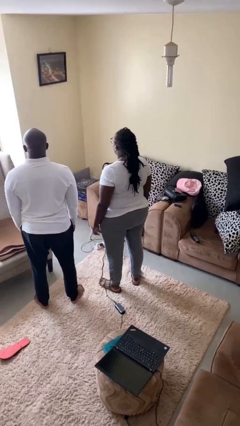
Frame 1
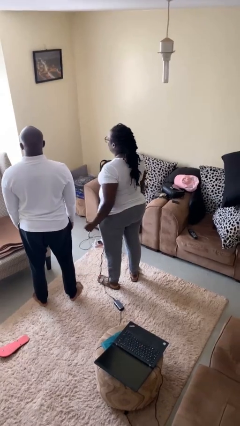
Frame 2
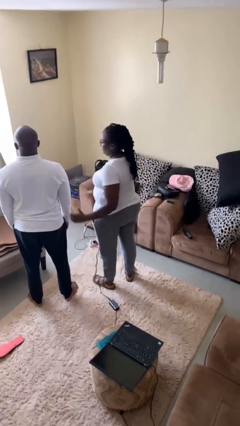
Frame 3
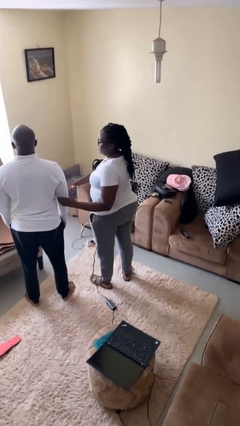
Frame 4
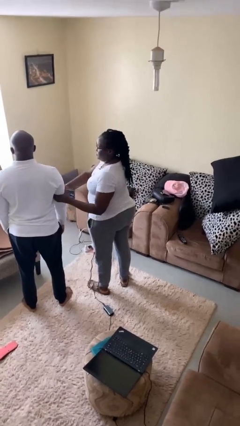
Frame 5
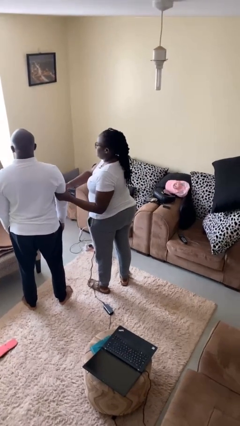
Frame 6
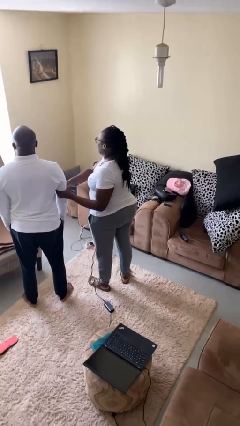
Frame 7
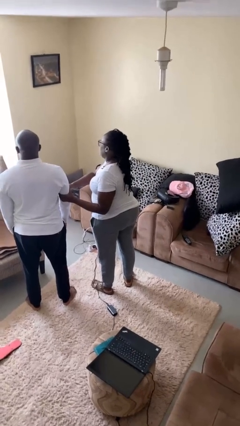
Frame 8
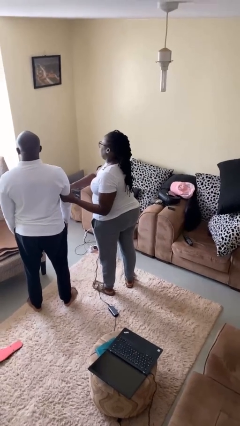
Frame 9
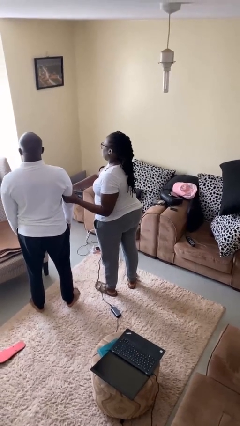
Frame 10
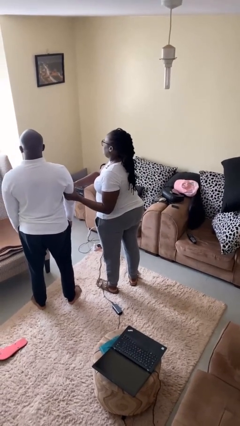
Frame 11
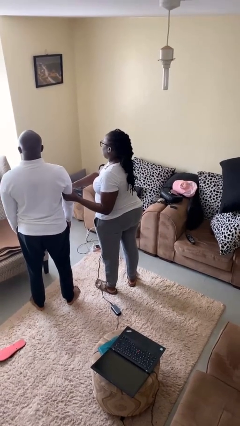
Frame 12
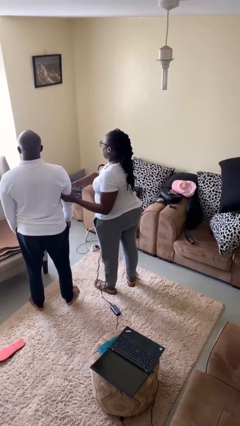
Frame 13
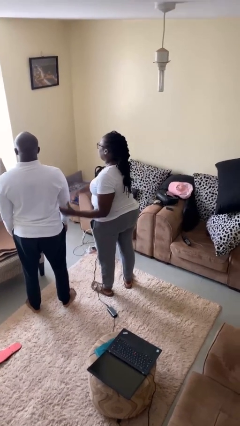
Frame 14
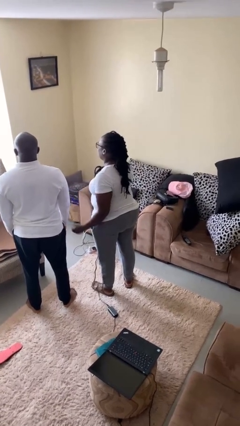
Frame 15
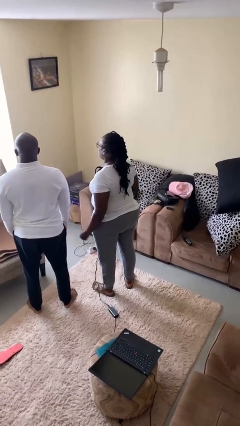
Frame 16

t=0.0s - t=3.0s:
person grabs person by bicep

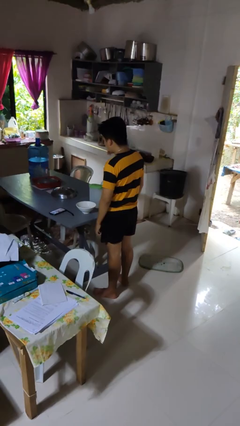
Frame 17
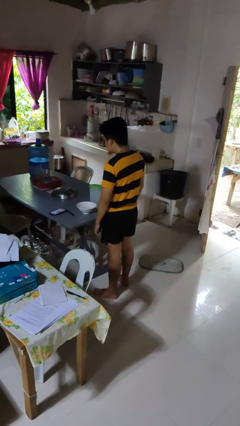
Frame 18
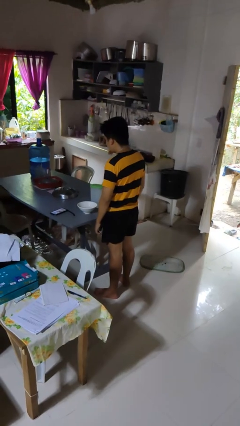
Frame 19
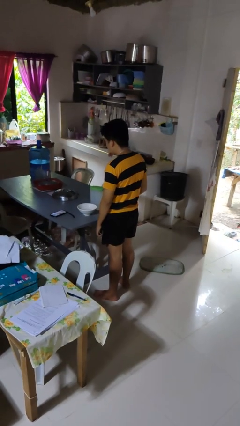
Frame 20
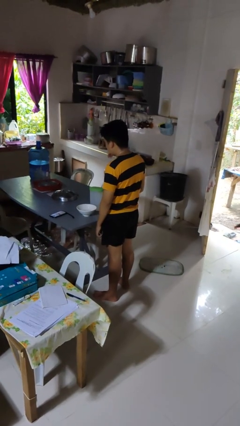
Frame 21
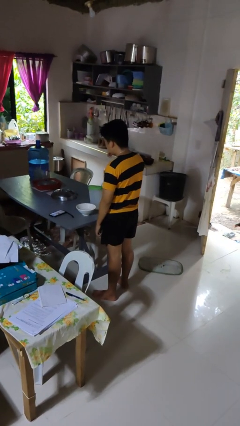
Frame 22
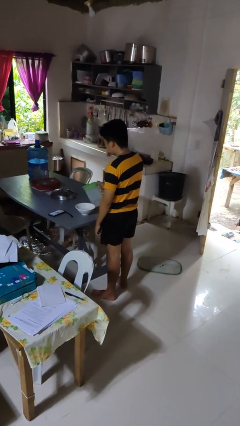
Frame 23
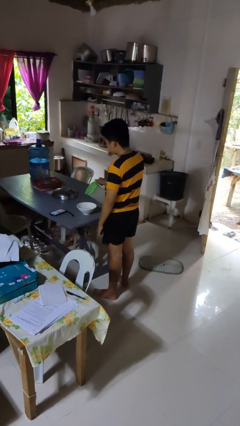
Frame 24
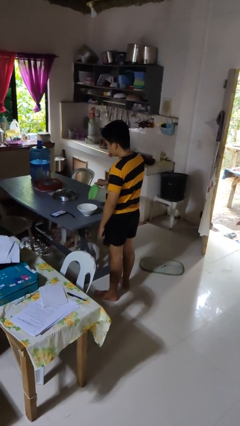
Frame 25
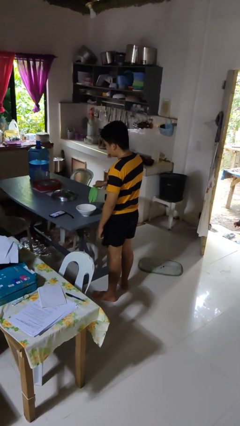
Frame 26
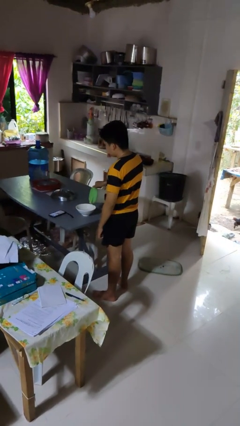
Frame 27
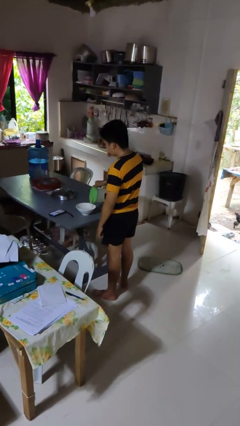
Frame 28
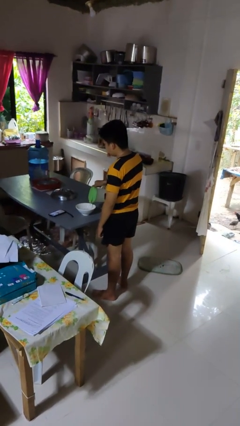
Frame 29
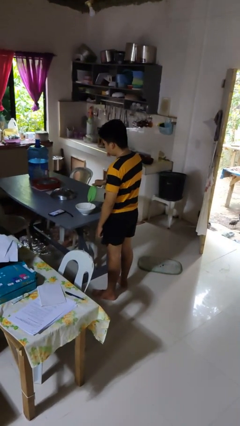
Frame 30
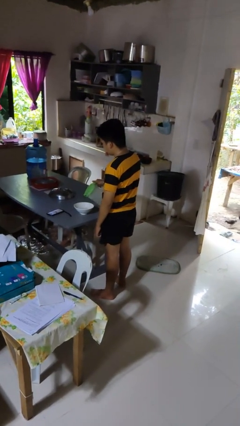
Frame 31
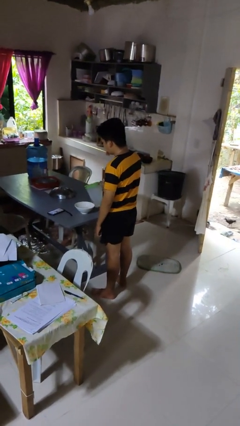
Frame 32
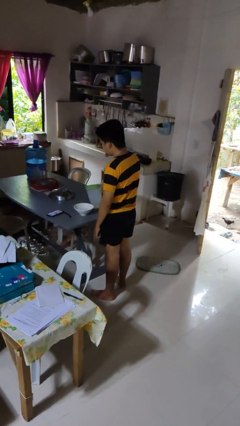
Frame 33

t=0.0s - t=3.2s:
person pours into bowl

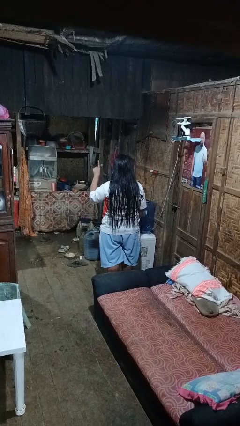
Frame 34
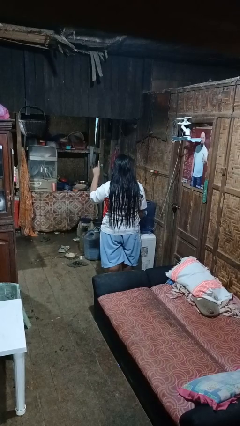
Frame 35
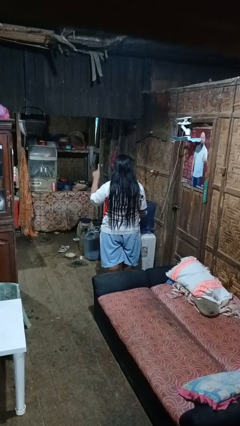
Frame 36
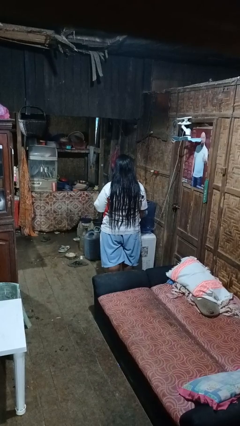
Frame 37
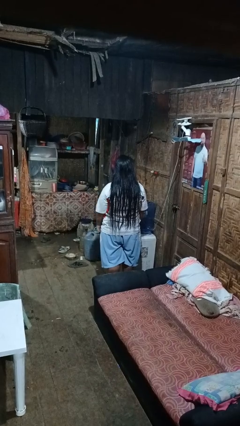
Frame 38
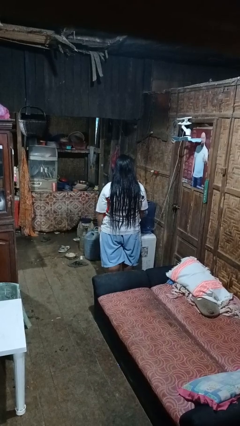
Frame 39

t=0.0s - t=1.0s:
person gestures number one

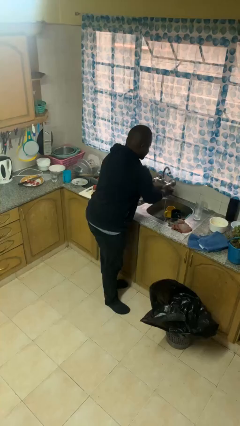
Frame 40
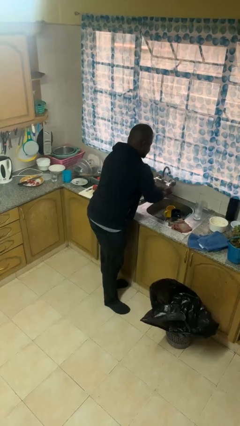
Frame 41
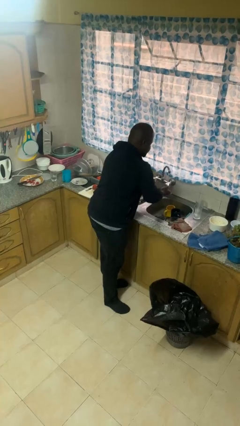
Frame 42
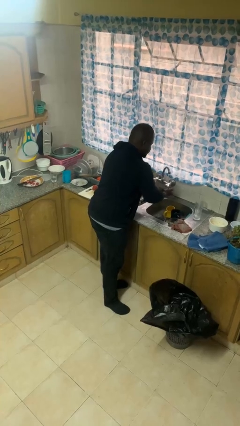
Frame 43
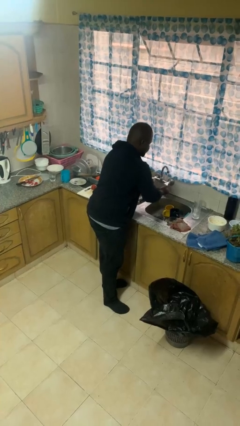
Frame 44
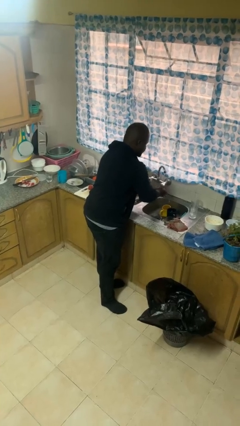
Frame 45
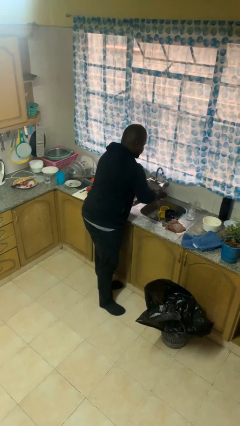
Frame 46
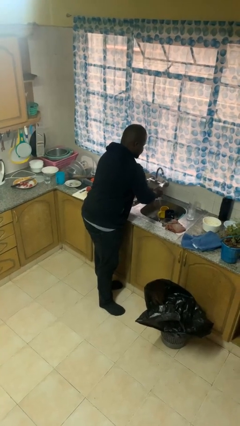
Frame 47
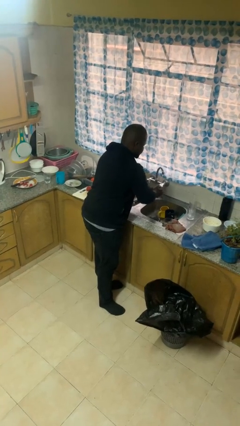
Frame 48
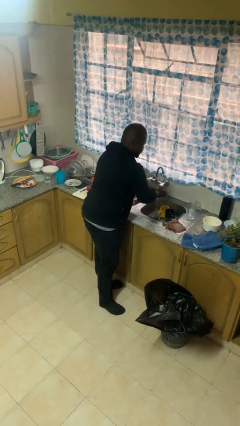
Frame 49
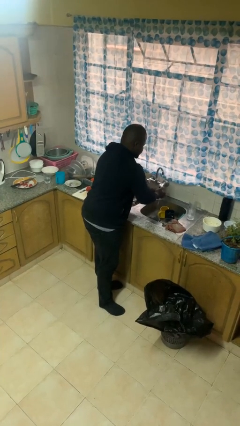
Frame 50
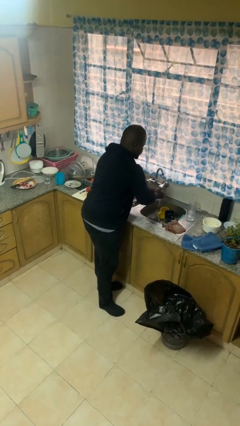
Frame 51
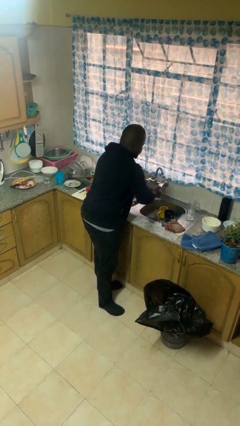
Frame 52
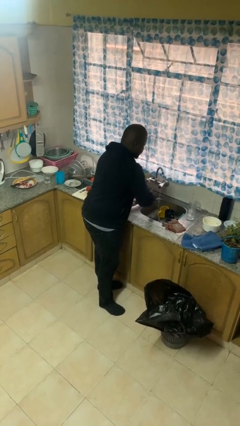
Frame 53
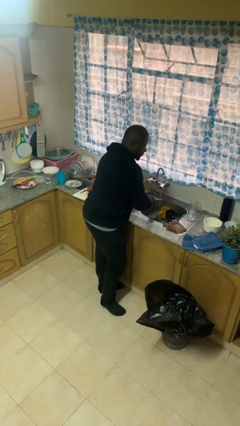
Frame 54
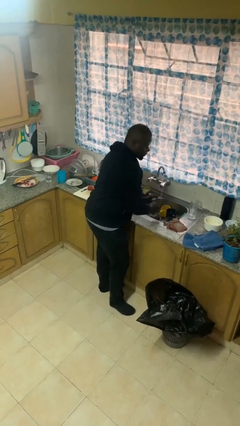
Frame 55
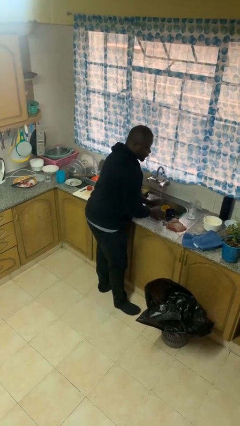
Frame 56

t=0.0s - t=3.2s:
person washes hands

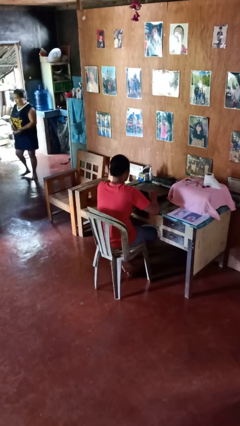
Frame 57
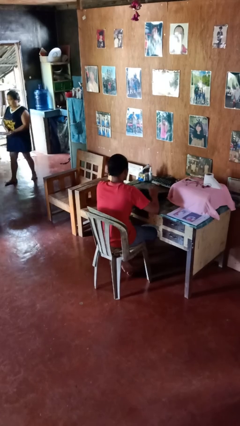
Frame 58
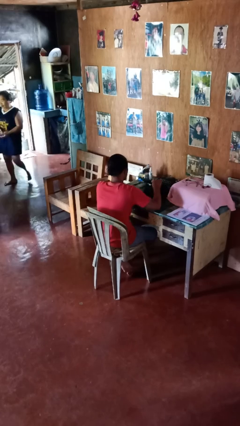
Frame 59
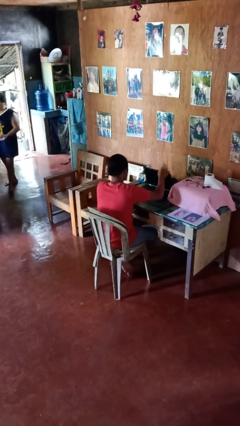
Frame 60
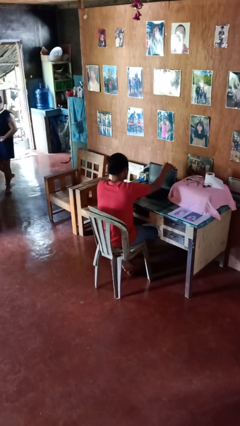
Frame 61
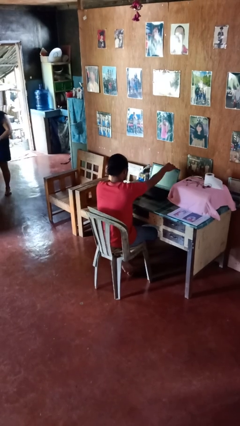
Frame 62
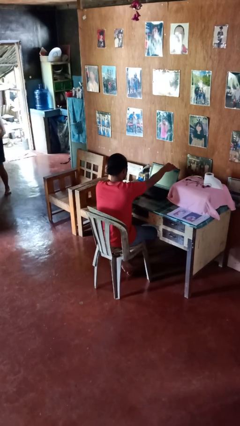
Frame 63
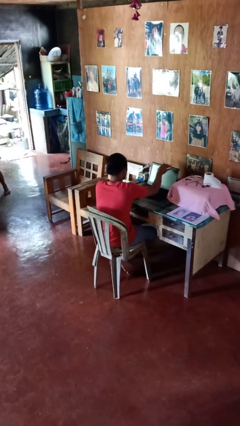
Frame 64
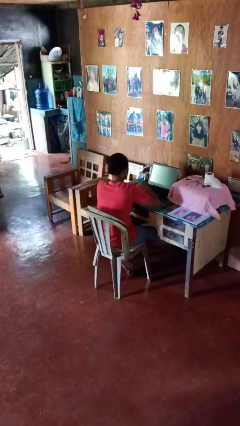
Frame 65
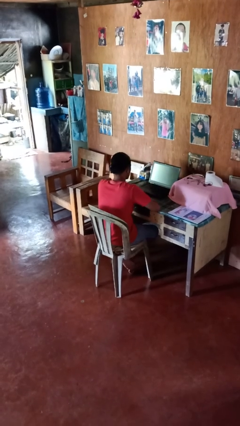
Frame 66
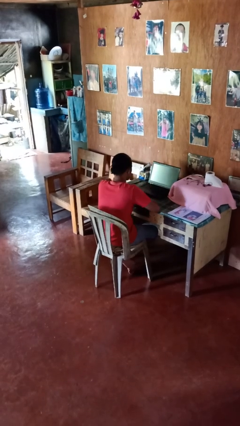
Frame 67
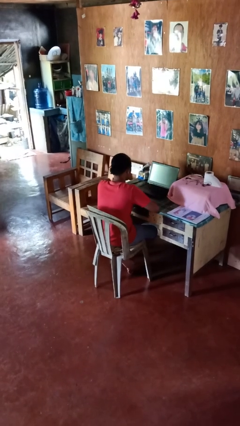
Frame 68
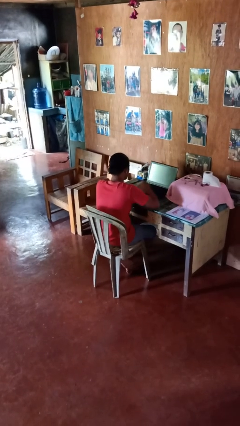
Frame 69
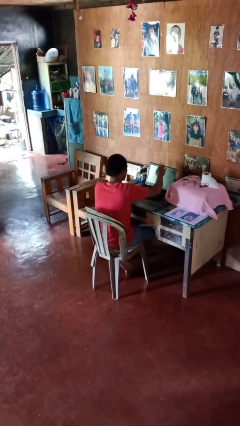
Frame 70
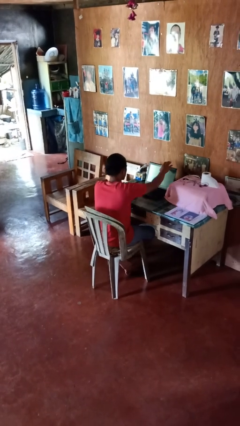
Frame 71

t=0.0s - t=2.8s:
person opens laptop

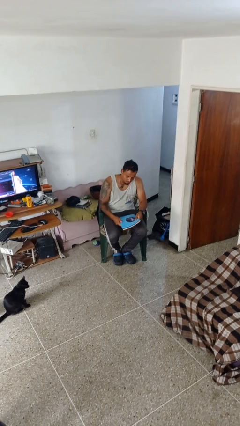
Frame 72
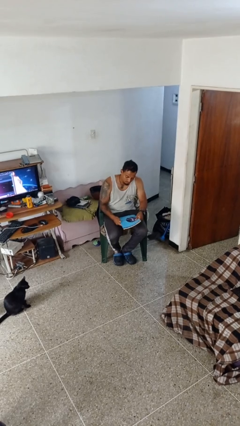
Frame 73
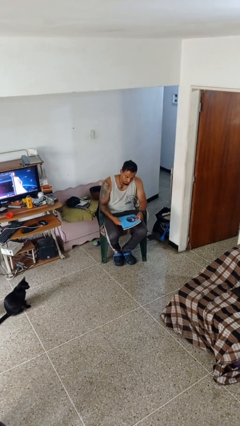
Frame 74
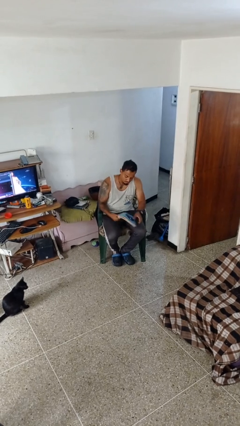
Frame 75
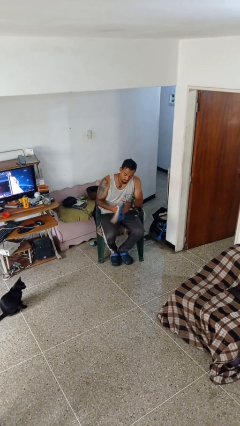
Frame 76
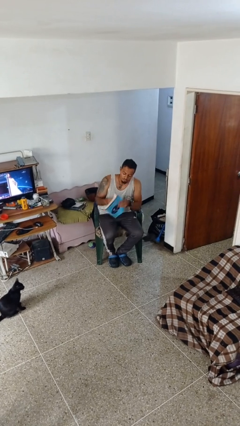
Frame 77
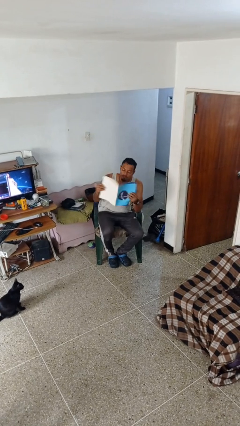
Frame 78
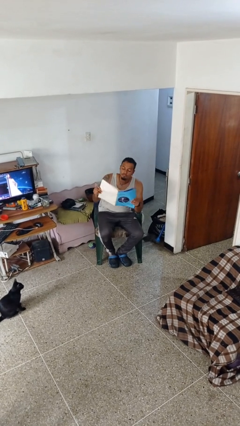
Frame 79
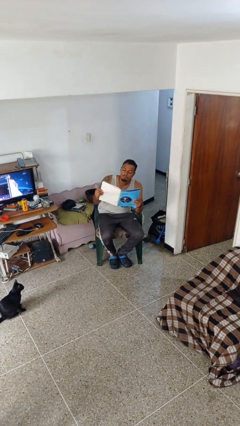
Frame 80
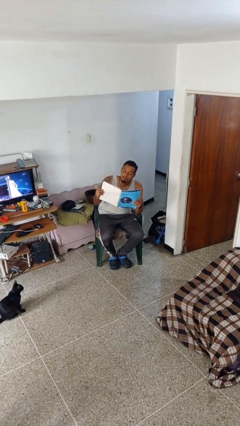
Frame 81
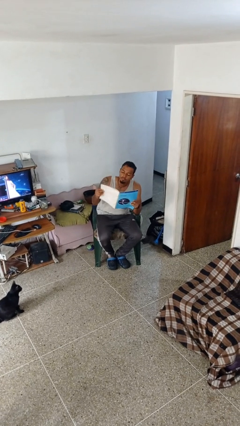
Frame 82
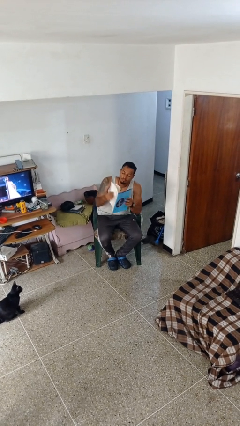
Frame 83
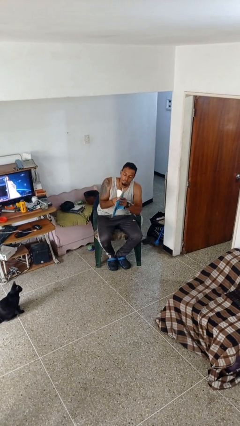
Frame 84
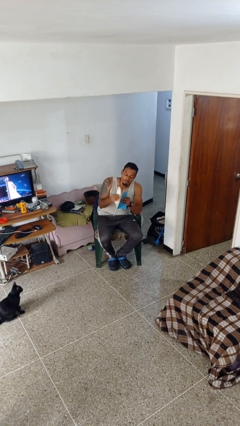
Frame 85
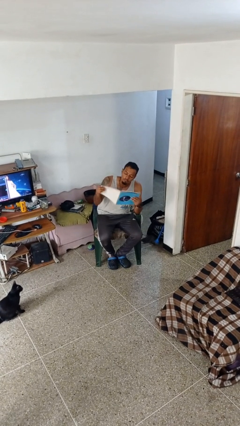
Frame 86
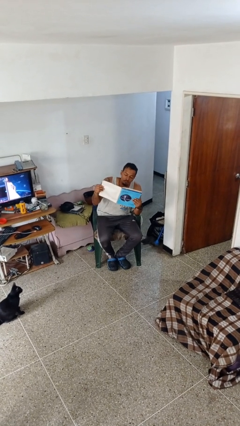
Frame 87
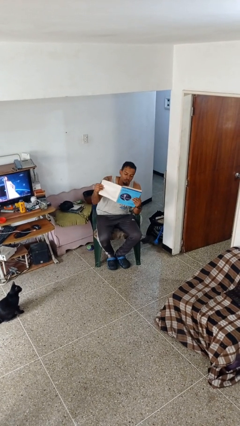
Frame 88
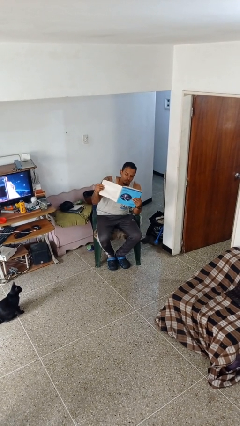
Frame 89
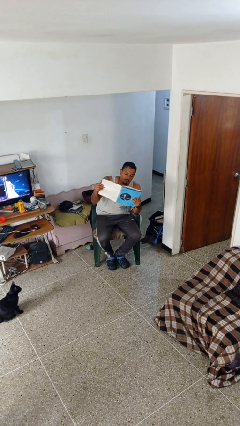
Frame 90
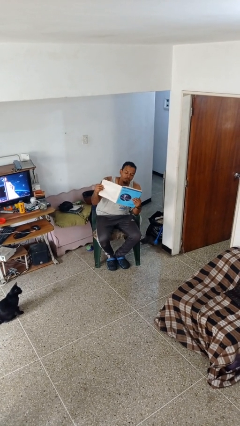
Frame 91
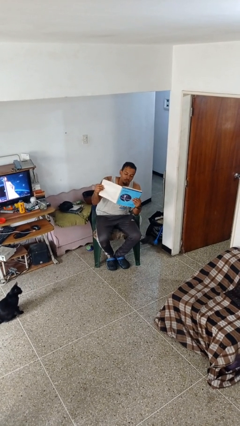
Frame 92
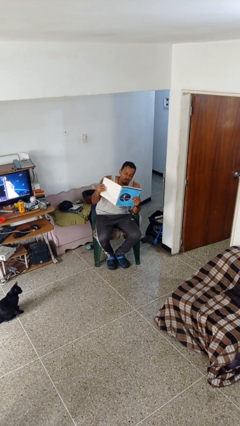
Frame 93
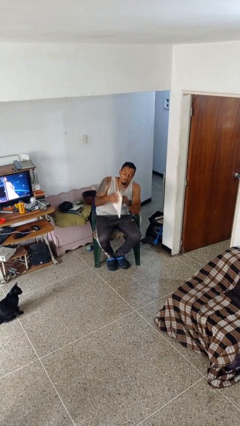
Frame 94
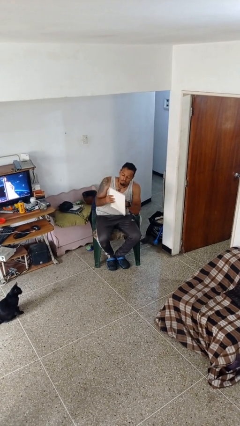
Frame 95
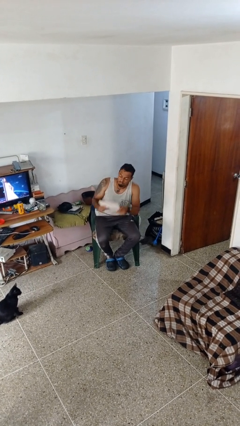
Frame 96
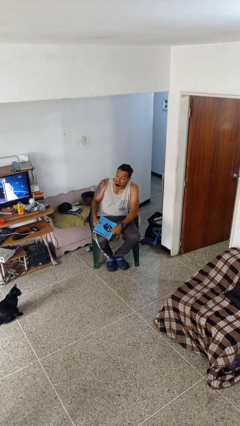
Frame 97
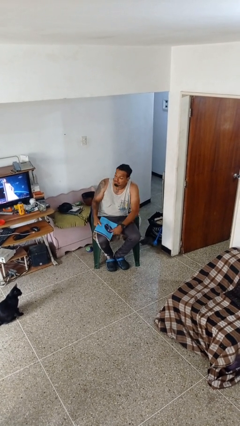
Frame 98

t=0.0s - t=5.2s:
person reads magazine
